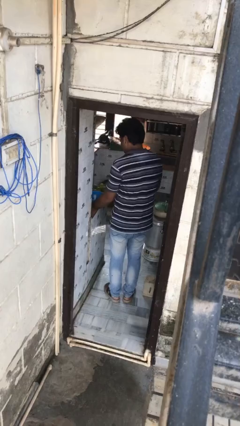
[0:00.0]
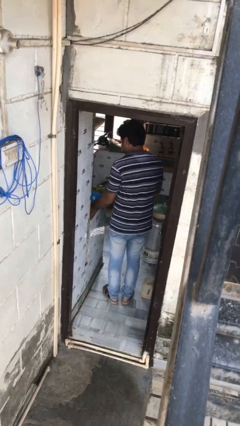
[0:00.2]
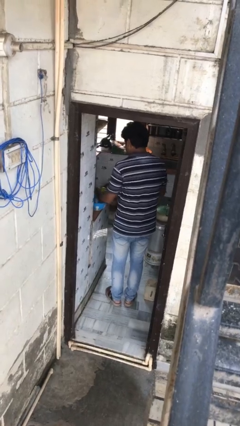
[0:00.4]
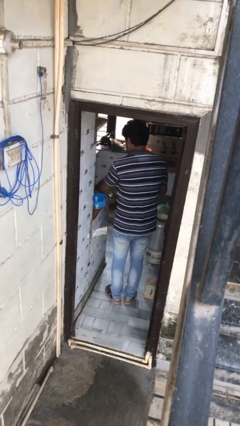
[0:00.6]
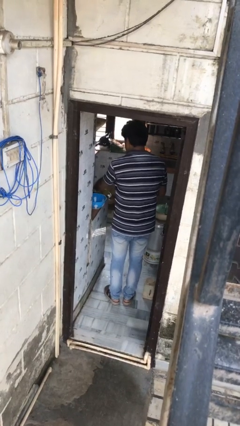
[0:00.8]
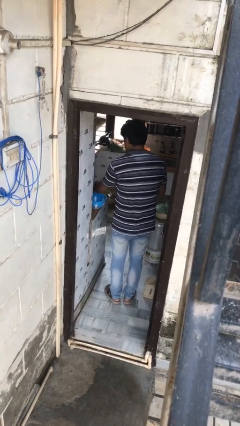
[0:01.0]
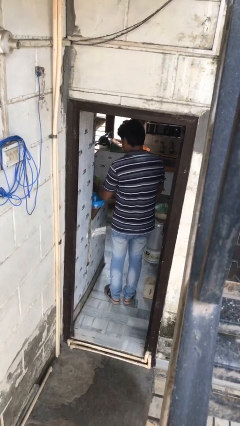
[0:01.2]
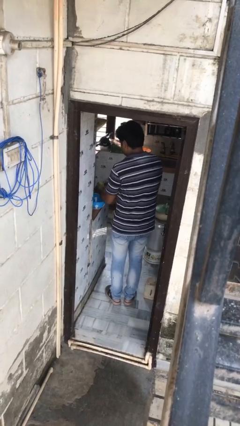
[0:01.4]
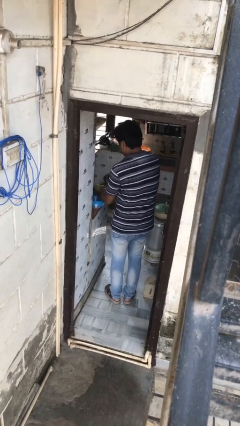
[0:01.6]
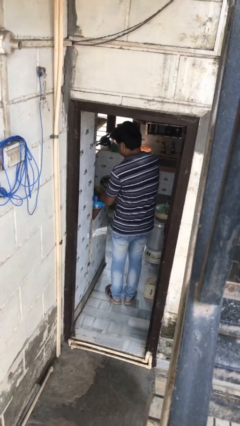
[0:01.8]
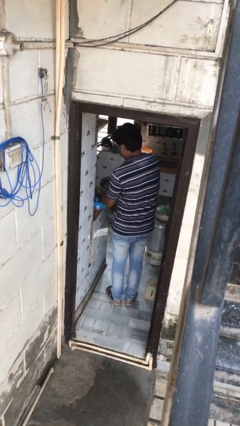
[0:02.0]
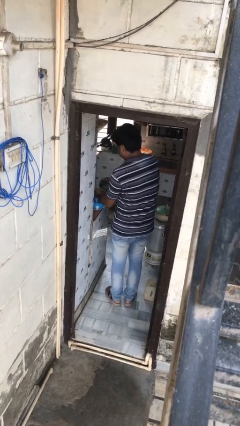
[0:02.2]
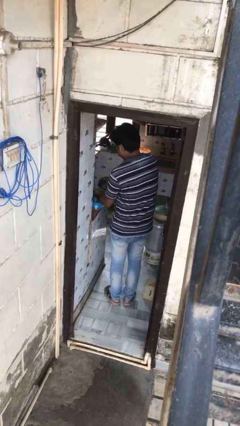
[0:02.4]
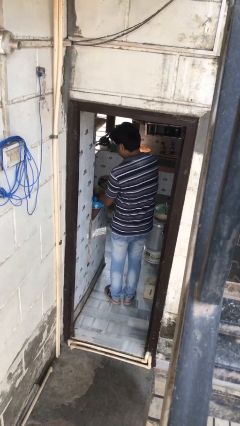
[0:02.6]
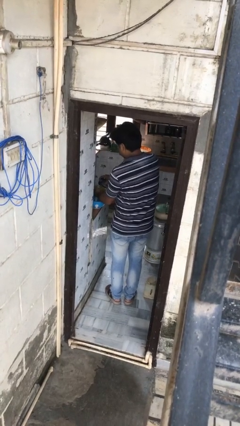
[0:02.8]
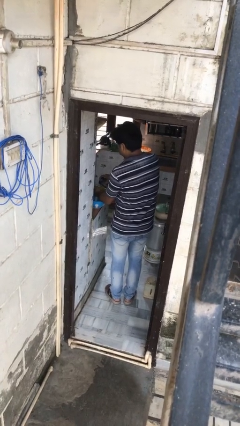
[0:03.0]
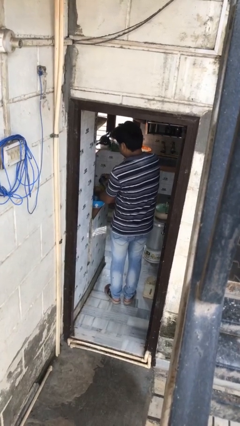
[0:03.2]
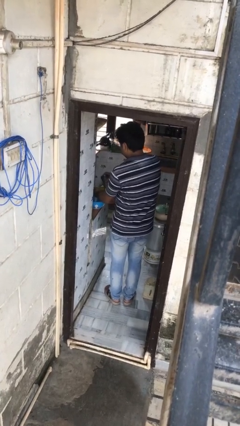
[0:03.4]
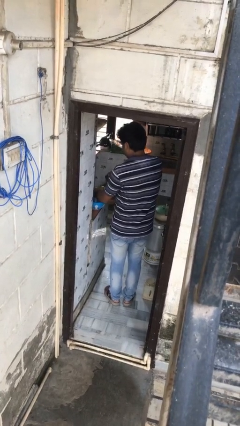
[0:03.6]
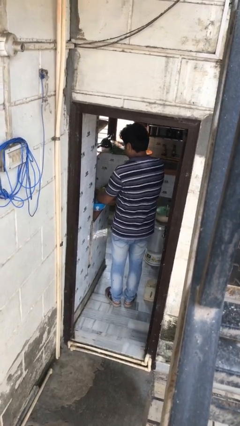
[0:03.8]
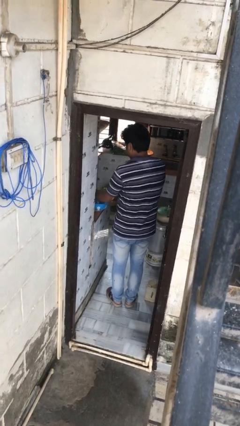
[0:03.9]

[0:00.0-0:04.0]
person washes dish

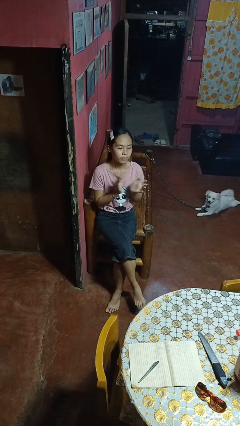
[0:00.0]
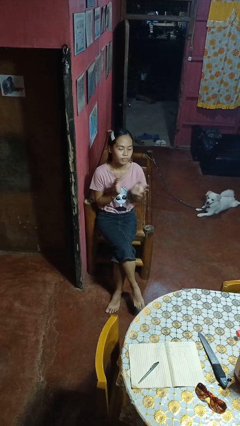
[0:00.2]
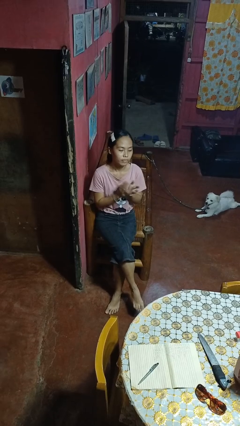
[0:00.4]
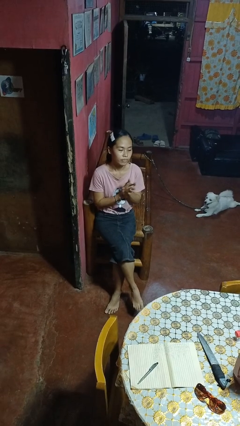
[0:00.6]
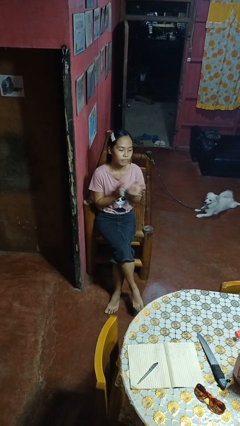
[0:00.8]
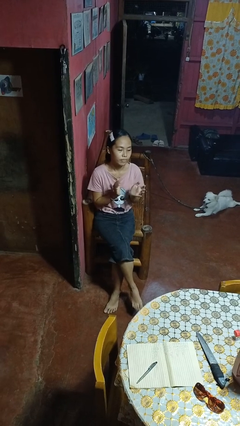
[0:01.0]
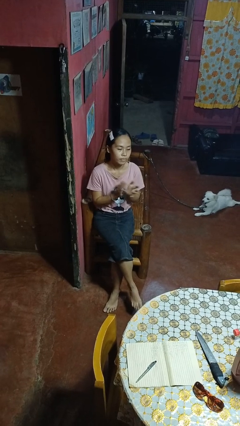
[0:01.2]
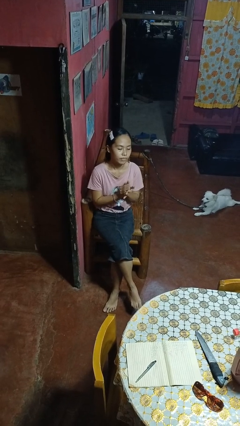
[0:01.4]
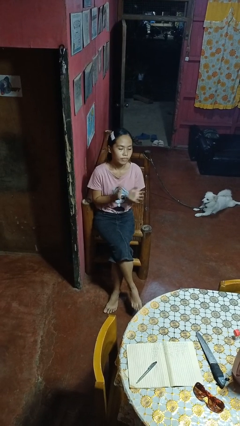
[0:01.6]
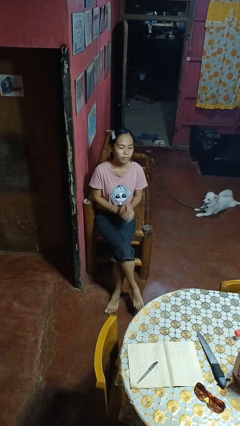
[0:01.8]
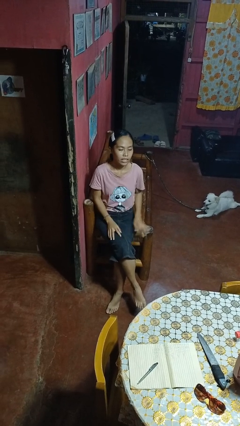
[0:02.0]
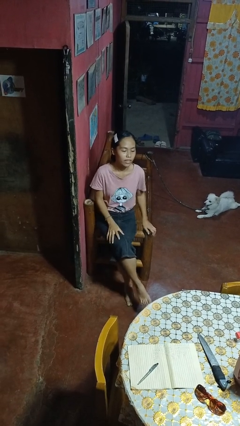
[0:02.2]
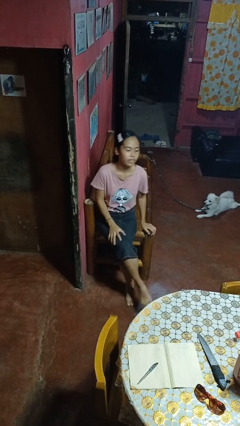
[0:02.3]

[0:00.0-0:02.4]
person claps hands

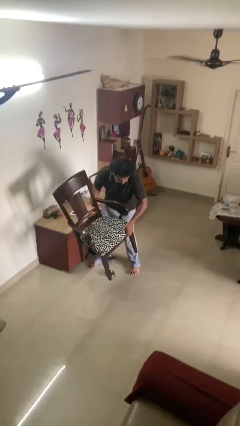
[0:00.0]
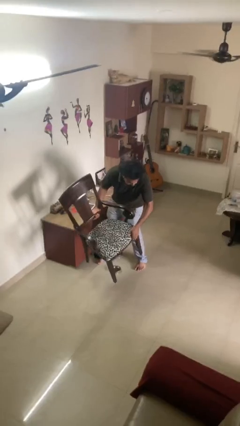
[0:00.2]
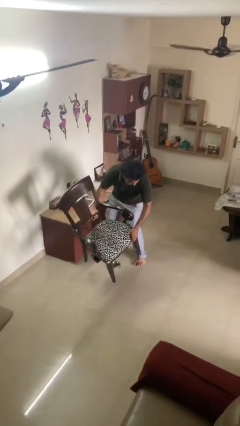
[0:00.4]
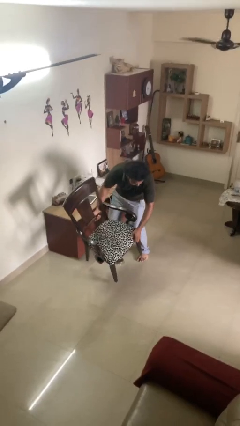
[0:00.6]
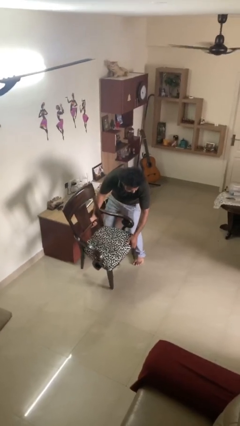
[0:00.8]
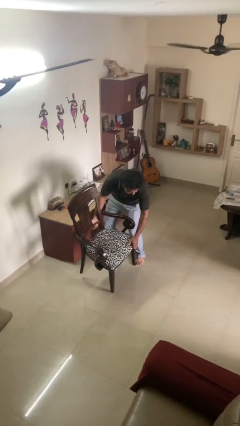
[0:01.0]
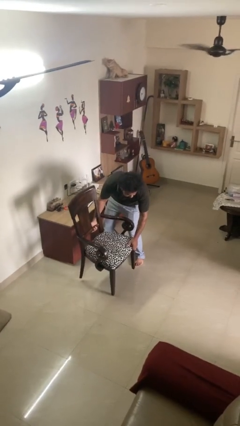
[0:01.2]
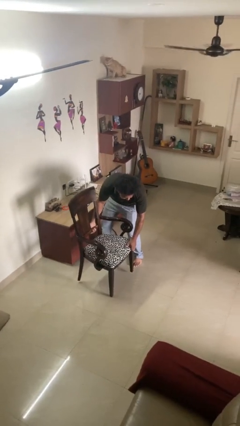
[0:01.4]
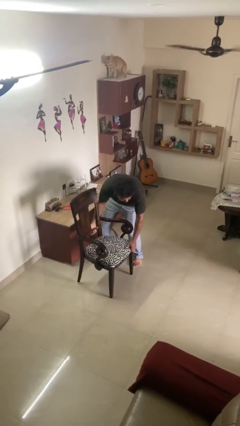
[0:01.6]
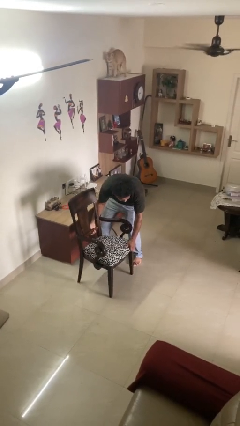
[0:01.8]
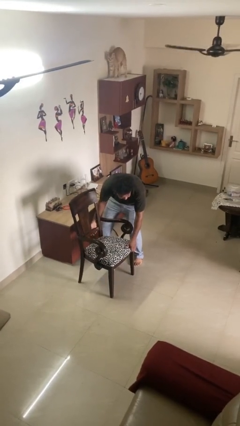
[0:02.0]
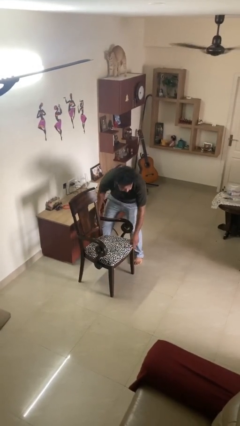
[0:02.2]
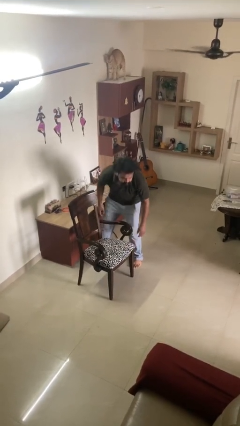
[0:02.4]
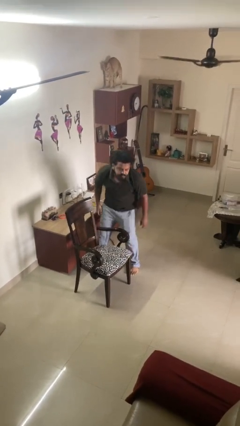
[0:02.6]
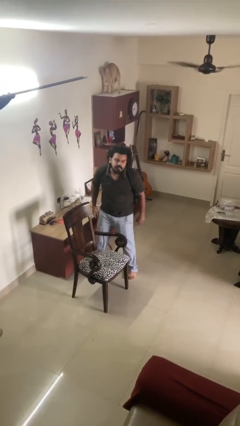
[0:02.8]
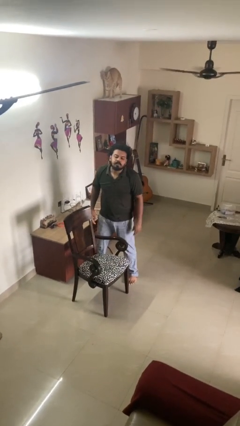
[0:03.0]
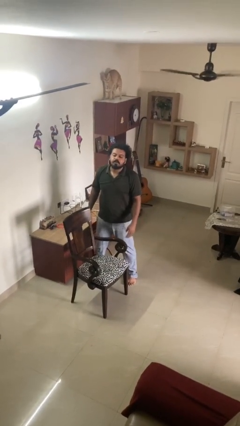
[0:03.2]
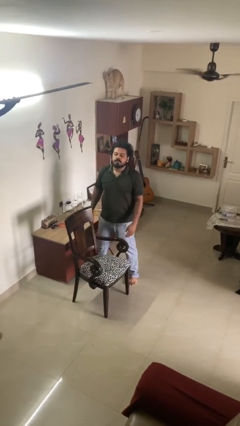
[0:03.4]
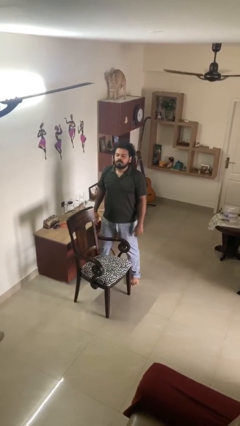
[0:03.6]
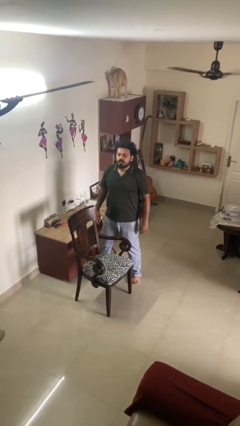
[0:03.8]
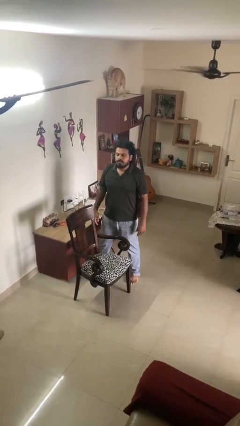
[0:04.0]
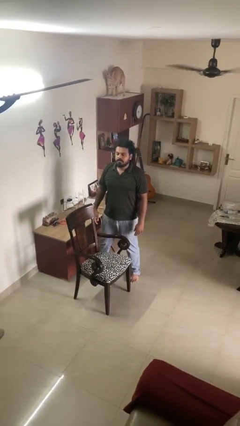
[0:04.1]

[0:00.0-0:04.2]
person puts down object on floor

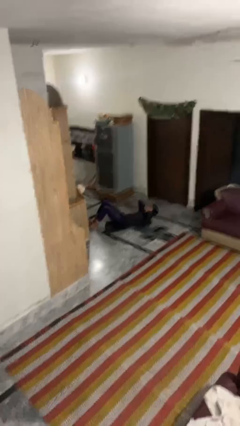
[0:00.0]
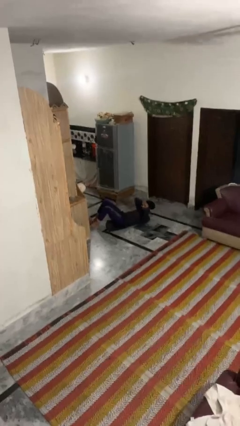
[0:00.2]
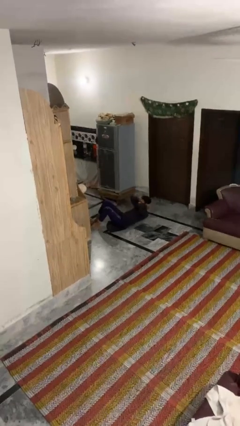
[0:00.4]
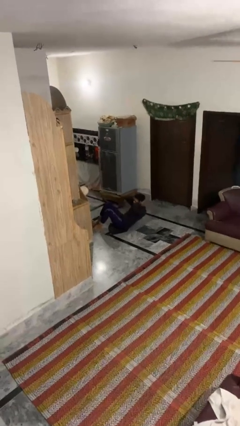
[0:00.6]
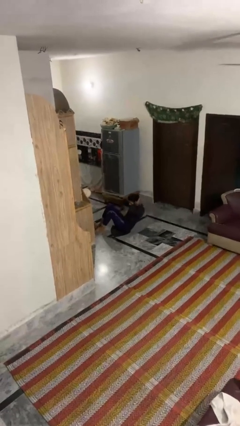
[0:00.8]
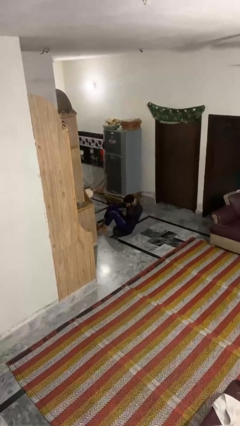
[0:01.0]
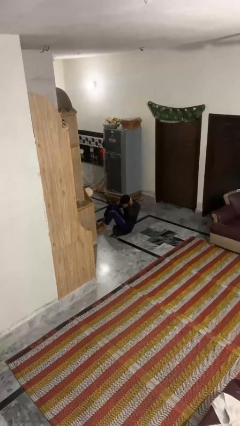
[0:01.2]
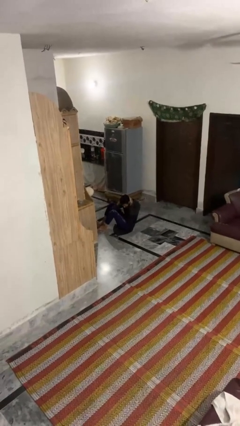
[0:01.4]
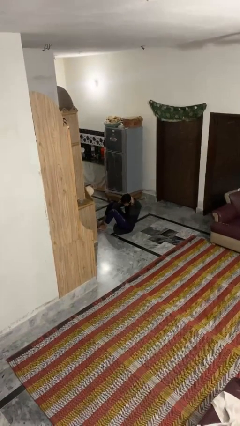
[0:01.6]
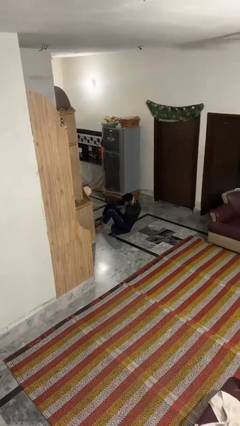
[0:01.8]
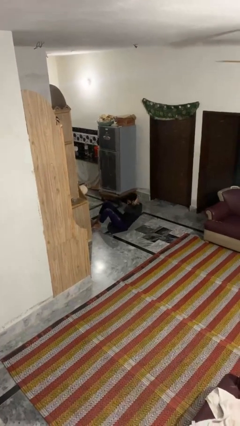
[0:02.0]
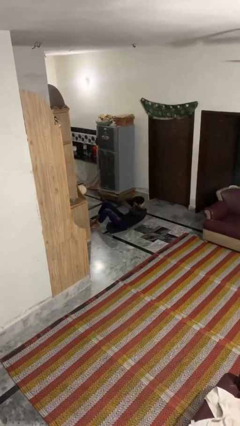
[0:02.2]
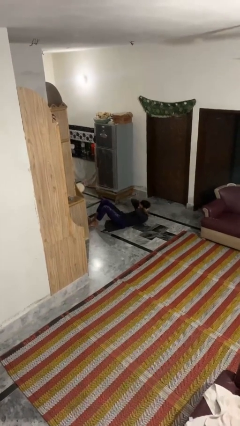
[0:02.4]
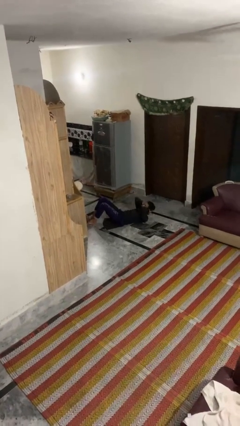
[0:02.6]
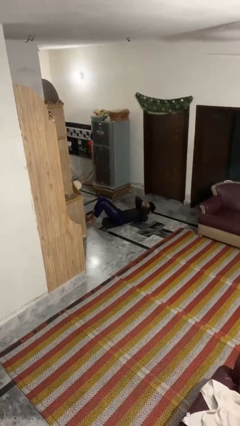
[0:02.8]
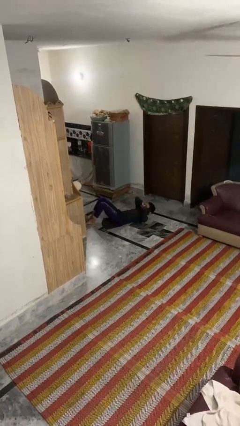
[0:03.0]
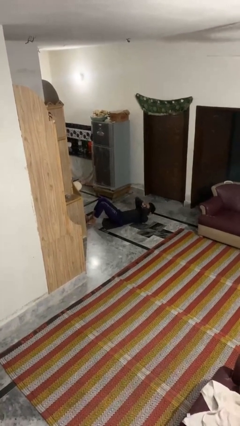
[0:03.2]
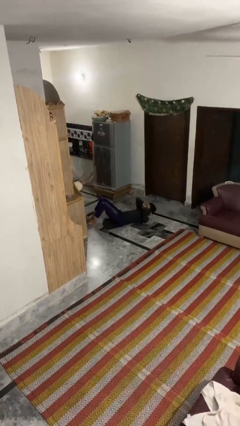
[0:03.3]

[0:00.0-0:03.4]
person exercises with situp

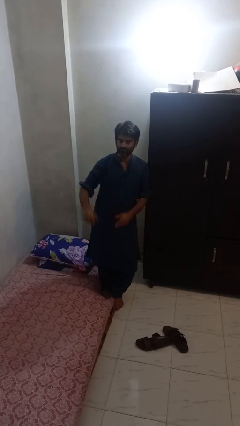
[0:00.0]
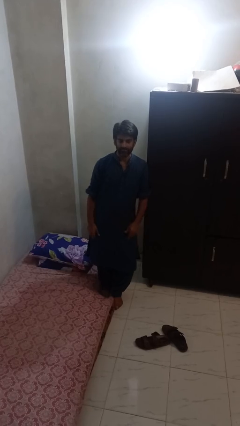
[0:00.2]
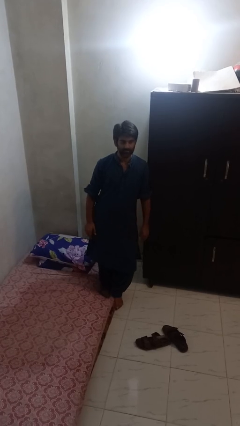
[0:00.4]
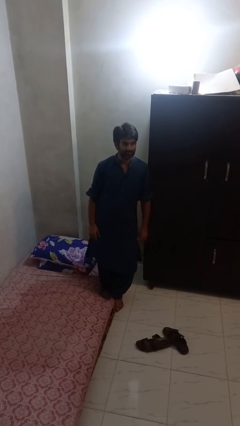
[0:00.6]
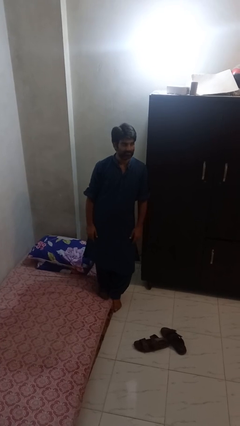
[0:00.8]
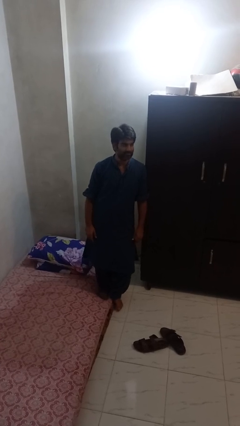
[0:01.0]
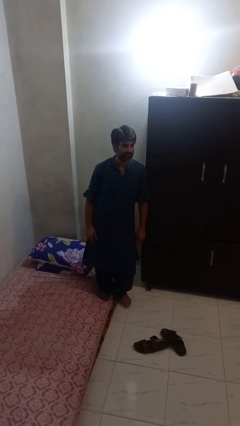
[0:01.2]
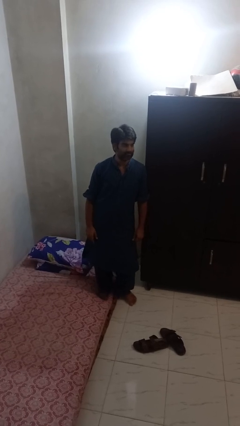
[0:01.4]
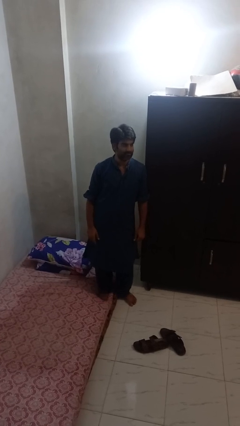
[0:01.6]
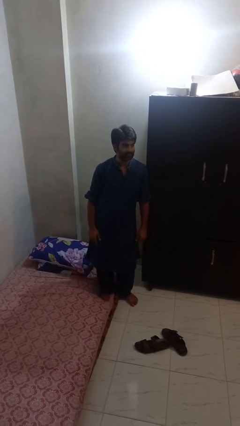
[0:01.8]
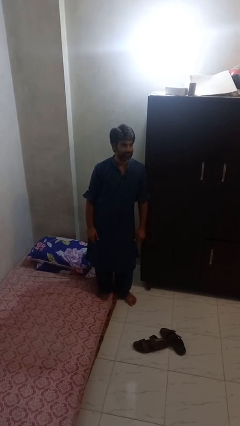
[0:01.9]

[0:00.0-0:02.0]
person gestures lower hand

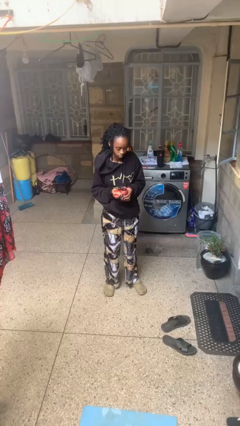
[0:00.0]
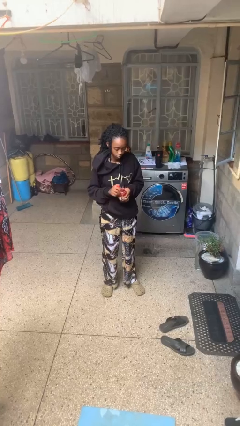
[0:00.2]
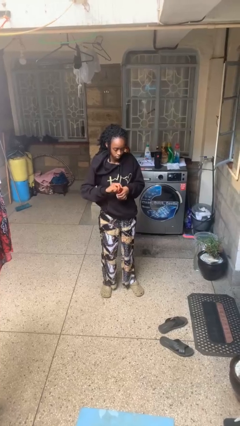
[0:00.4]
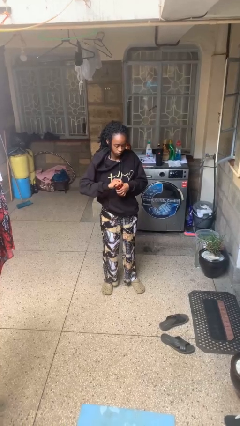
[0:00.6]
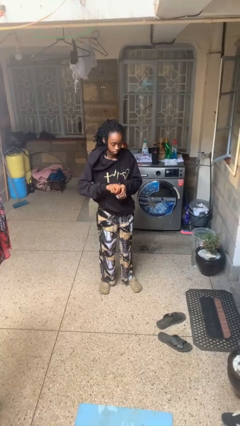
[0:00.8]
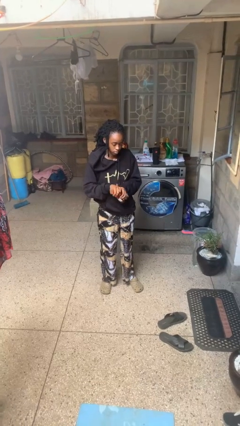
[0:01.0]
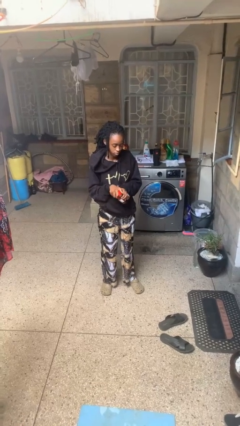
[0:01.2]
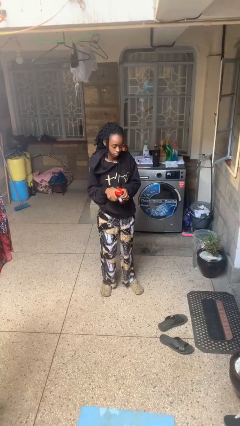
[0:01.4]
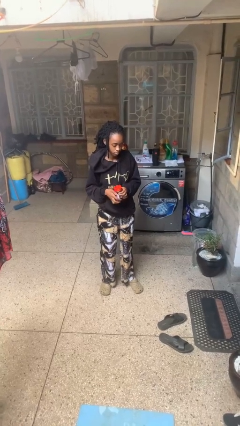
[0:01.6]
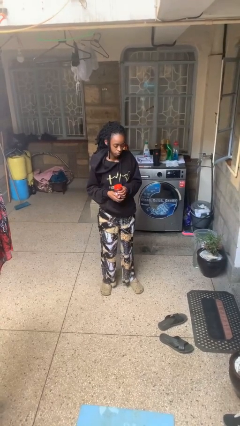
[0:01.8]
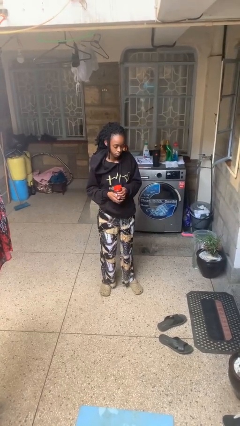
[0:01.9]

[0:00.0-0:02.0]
person closes jar
